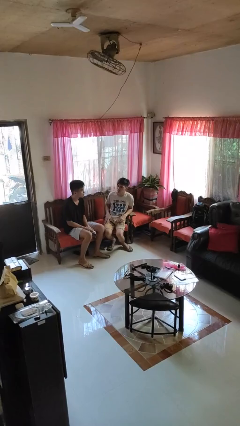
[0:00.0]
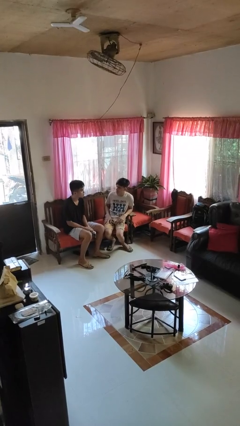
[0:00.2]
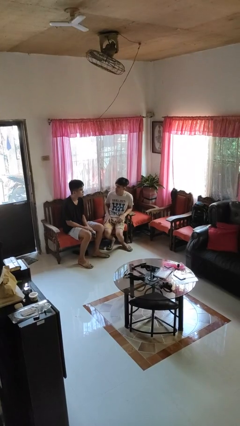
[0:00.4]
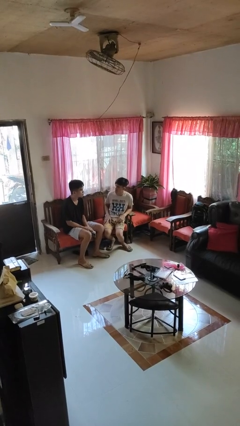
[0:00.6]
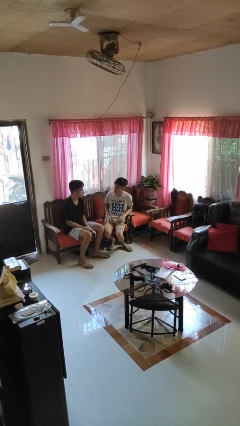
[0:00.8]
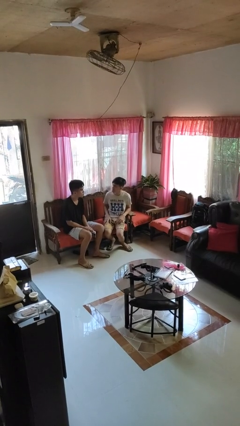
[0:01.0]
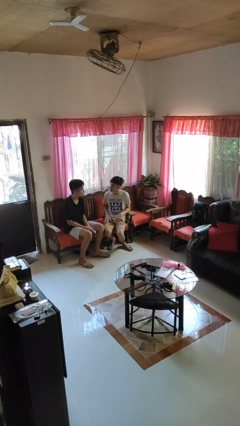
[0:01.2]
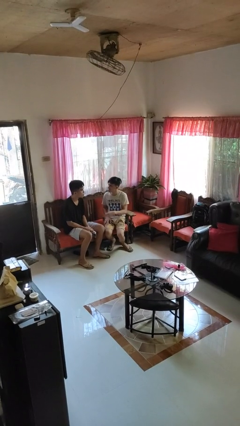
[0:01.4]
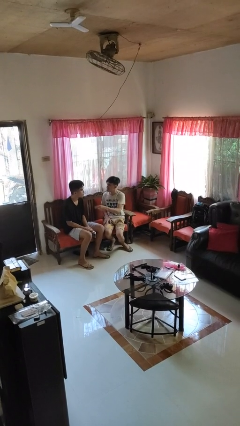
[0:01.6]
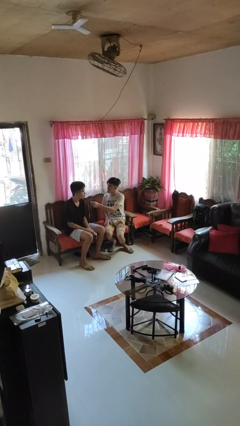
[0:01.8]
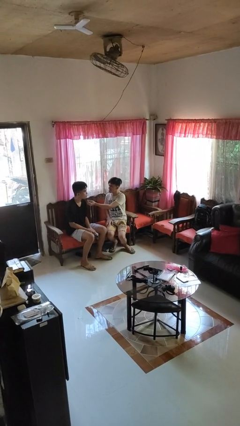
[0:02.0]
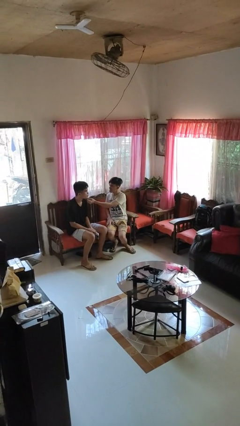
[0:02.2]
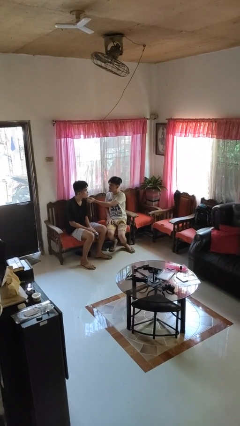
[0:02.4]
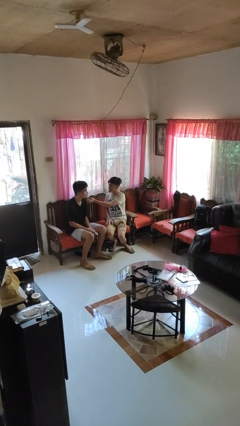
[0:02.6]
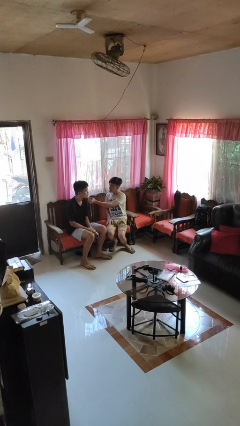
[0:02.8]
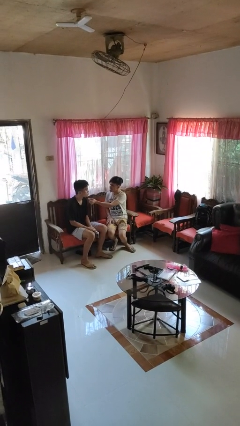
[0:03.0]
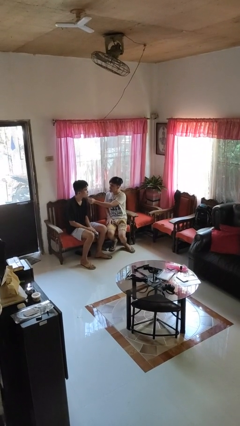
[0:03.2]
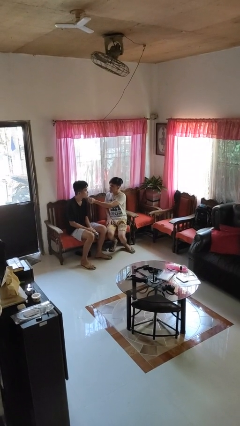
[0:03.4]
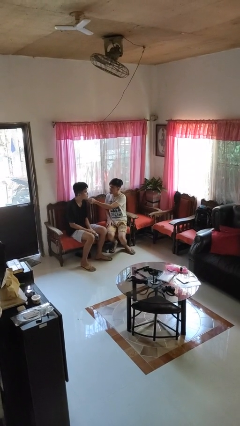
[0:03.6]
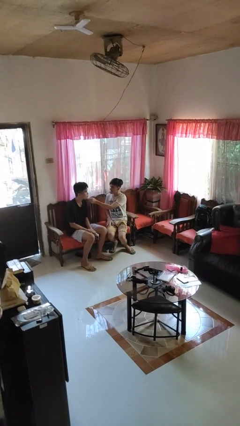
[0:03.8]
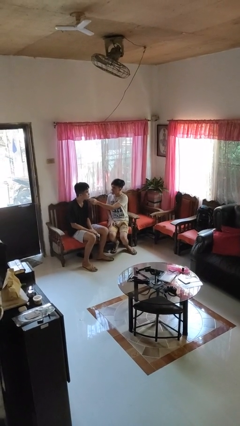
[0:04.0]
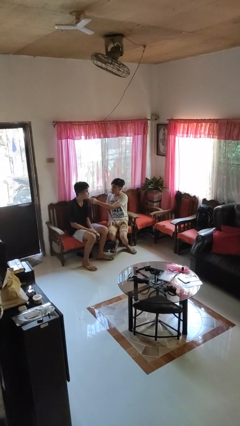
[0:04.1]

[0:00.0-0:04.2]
person touches face of person

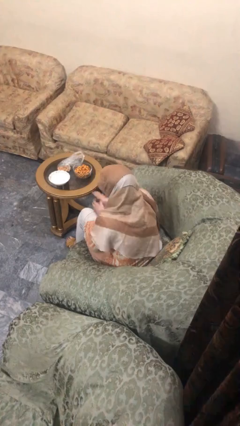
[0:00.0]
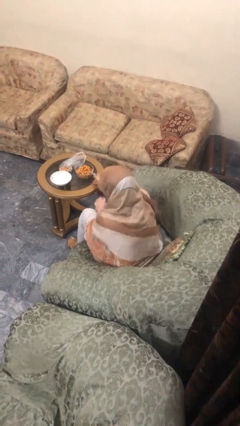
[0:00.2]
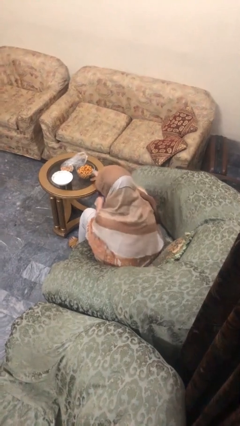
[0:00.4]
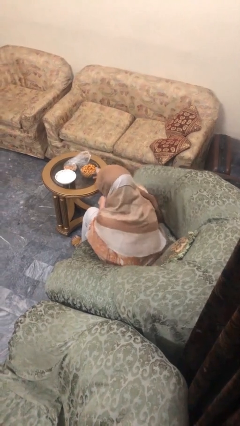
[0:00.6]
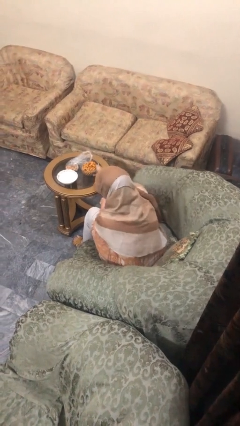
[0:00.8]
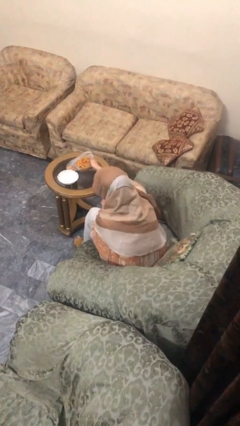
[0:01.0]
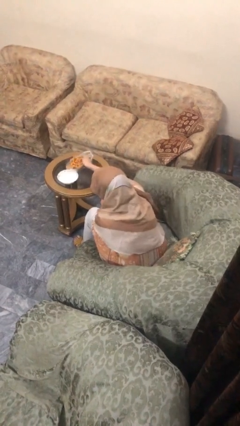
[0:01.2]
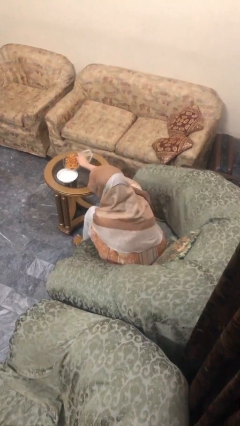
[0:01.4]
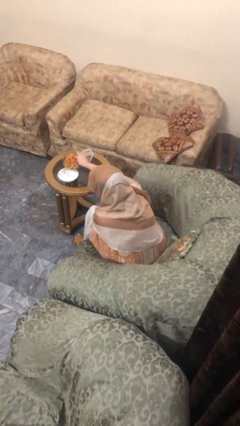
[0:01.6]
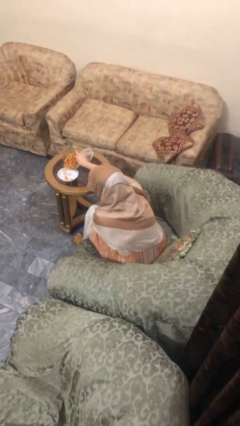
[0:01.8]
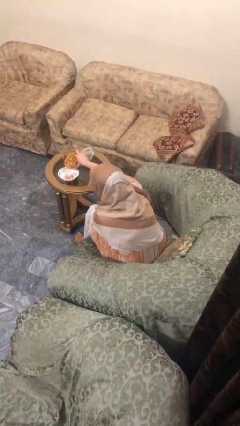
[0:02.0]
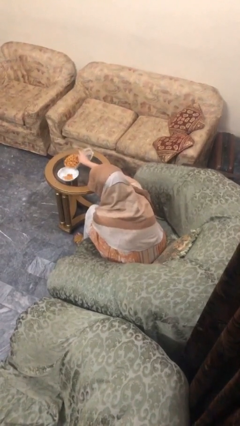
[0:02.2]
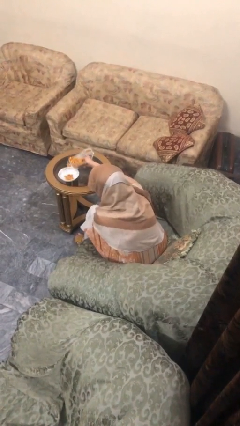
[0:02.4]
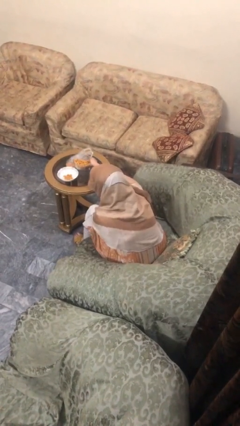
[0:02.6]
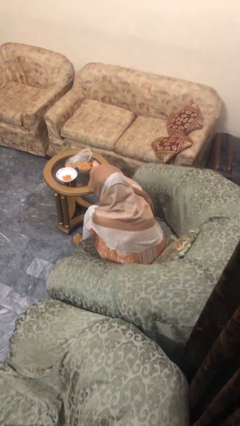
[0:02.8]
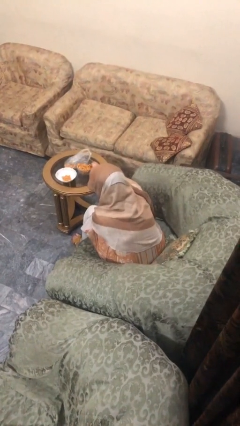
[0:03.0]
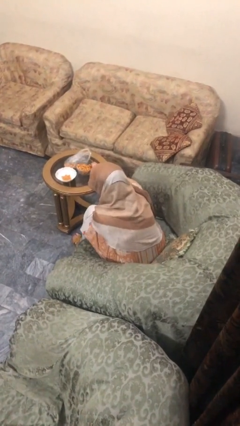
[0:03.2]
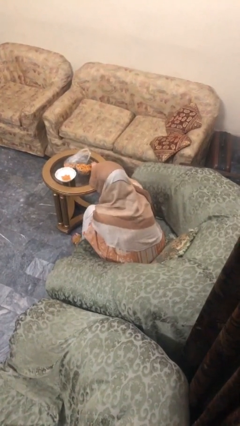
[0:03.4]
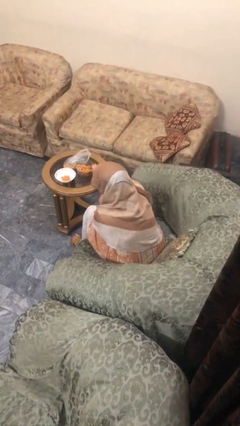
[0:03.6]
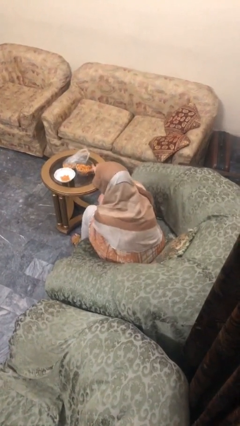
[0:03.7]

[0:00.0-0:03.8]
person pours into bowl

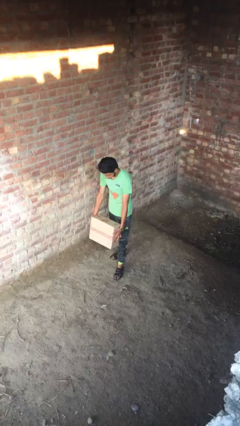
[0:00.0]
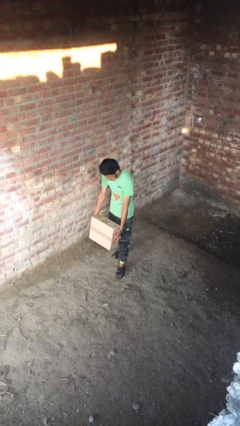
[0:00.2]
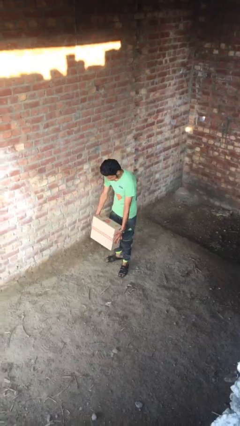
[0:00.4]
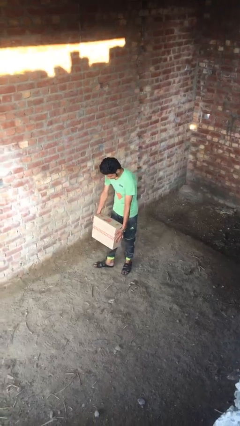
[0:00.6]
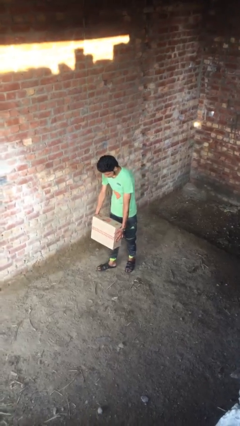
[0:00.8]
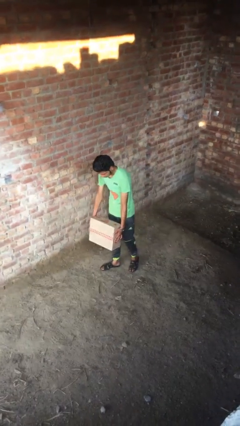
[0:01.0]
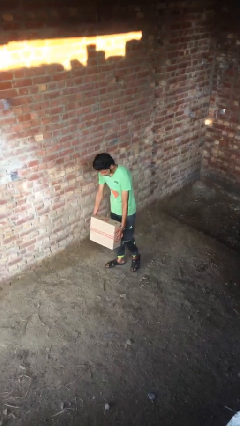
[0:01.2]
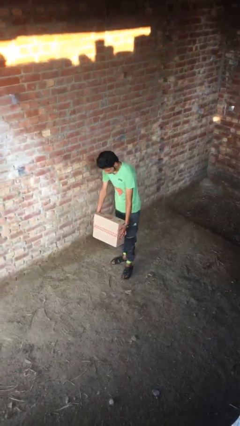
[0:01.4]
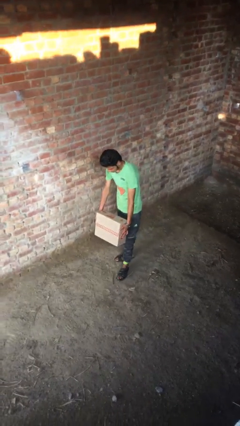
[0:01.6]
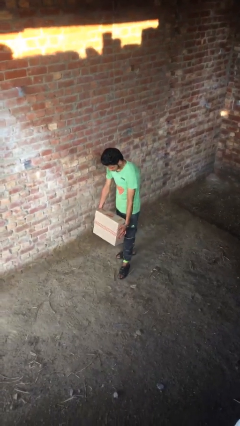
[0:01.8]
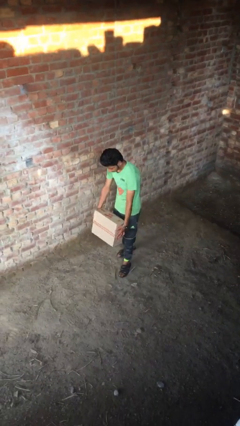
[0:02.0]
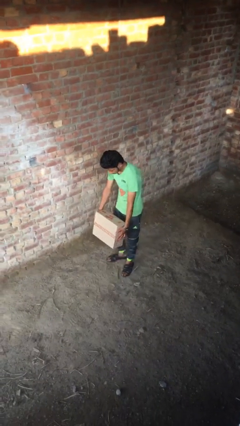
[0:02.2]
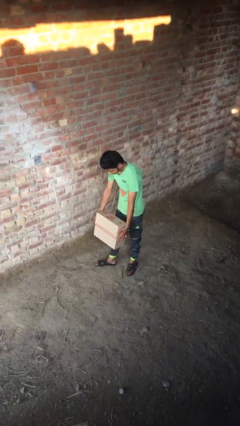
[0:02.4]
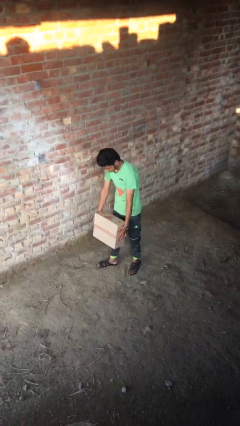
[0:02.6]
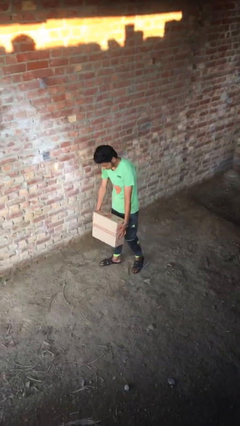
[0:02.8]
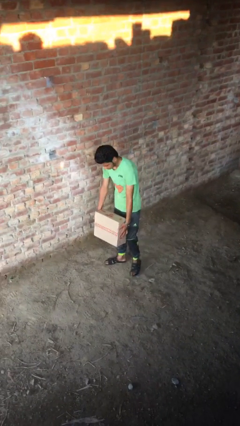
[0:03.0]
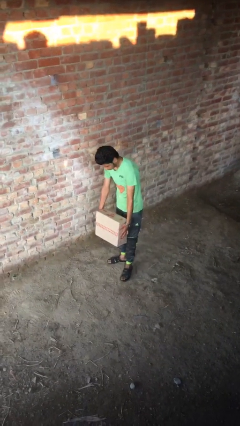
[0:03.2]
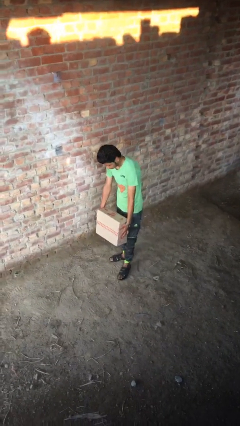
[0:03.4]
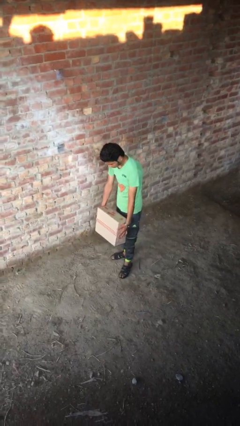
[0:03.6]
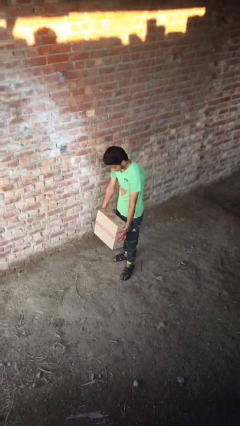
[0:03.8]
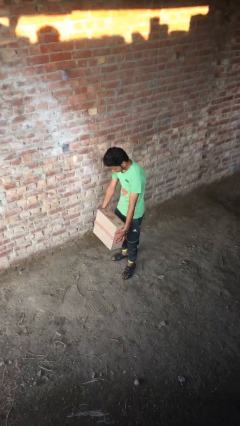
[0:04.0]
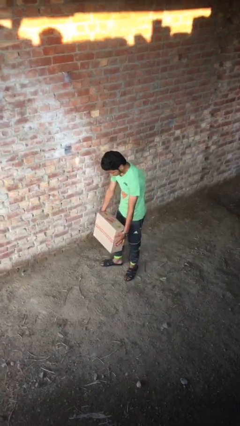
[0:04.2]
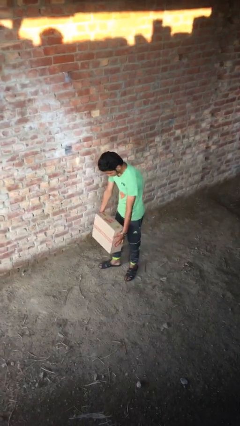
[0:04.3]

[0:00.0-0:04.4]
person carries heavy object

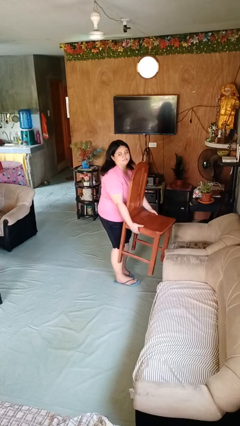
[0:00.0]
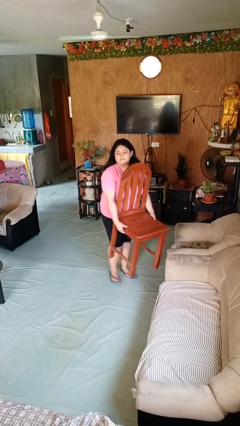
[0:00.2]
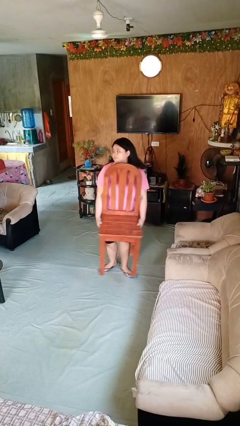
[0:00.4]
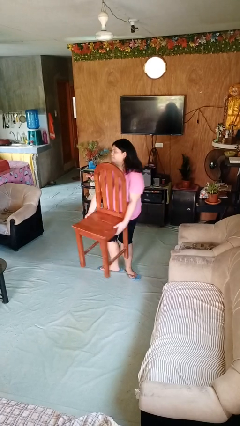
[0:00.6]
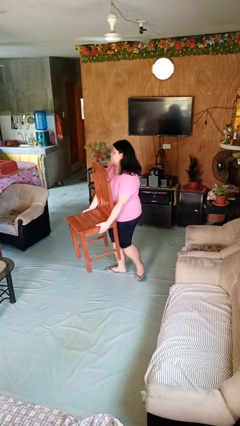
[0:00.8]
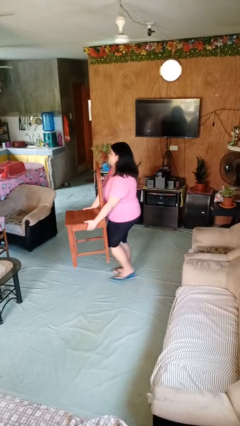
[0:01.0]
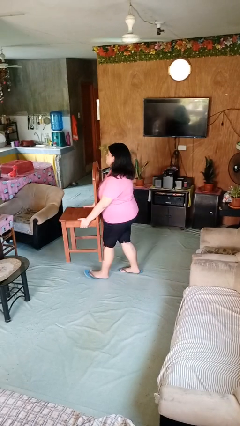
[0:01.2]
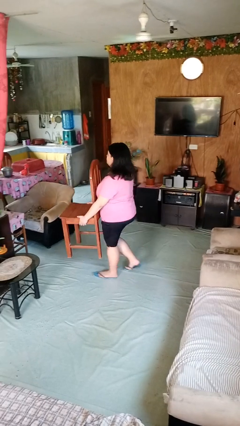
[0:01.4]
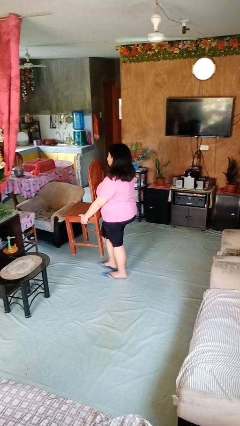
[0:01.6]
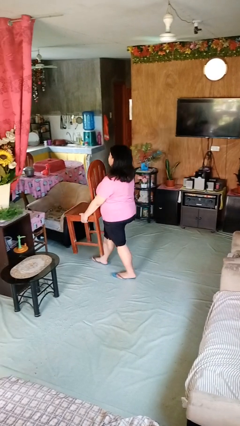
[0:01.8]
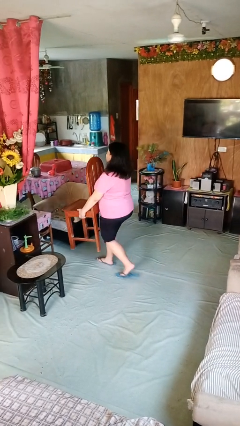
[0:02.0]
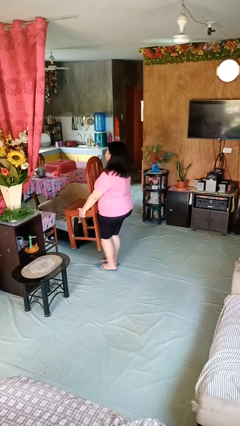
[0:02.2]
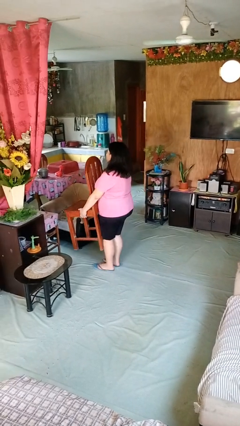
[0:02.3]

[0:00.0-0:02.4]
person carries furniture

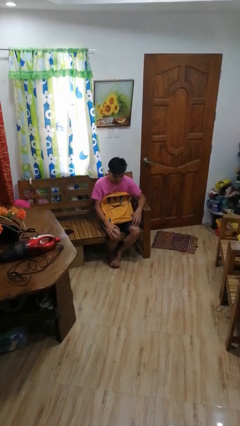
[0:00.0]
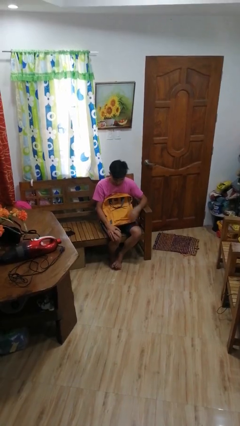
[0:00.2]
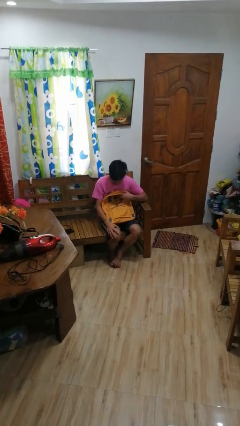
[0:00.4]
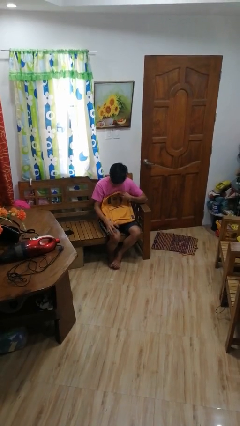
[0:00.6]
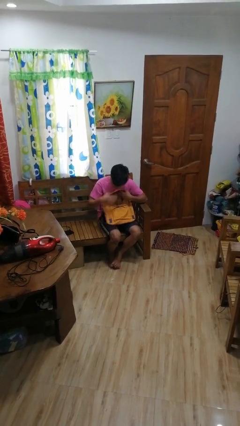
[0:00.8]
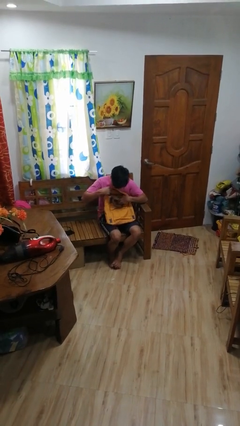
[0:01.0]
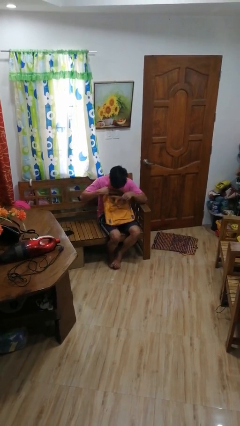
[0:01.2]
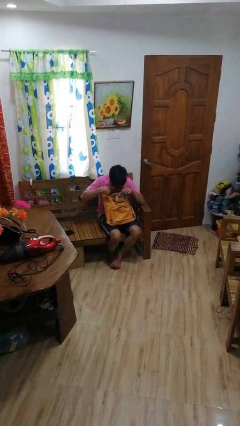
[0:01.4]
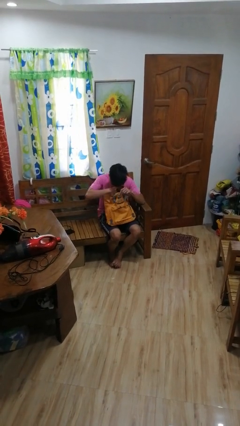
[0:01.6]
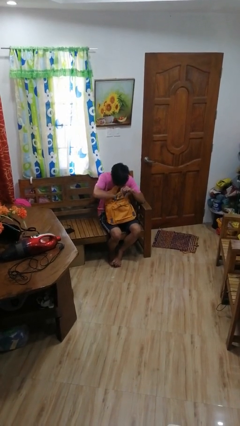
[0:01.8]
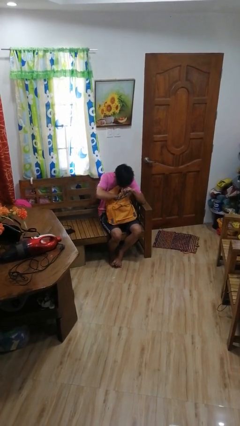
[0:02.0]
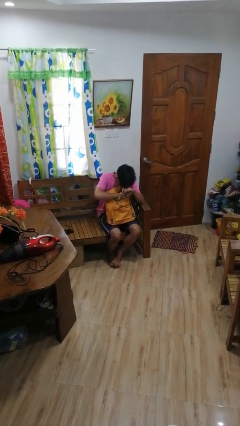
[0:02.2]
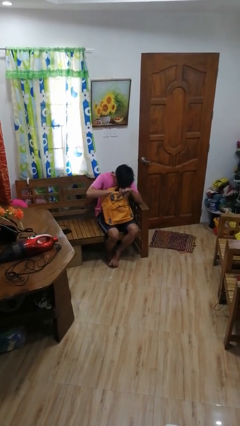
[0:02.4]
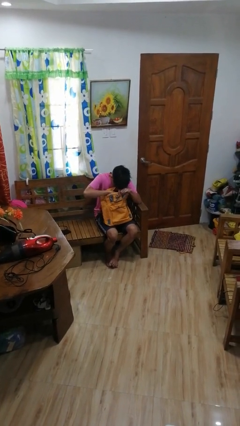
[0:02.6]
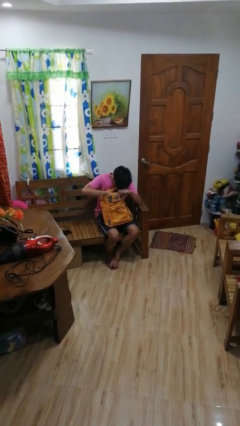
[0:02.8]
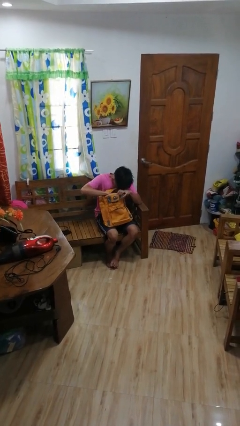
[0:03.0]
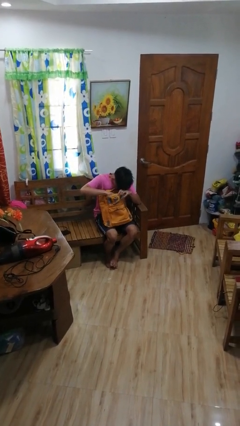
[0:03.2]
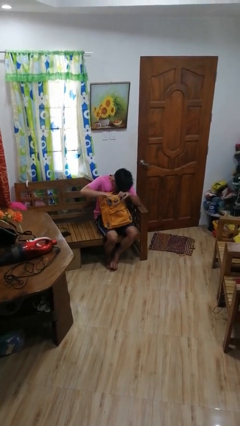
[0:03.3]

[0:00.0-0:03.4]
person searches in backpack
